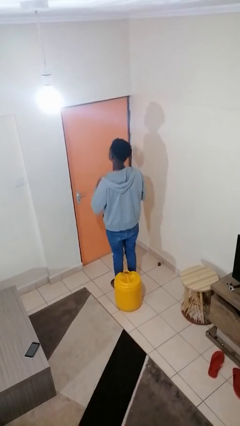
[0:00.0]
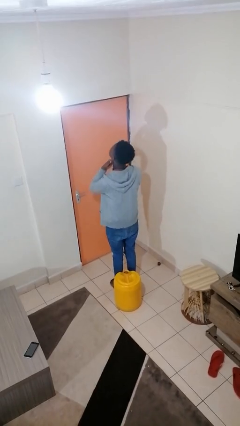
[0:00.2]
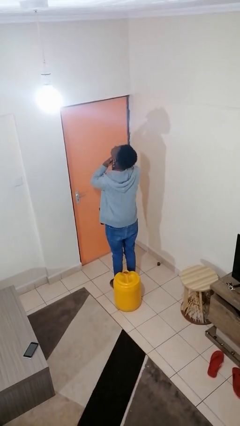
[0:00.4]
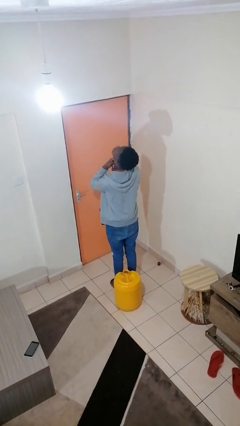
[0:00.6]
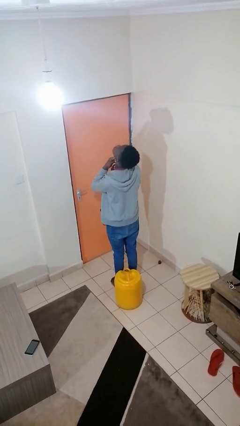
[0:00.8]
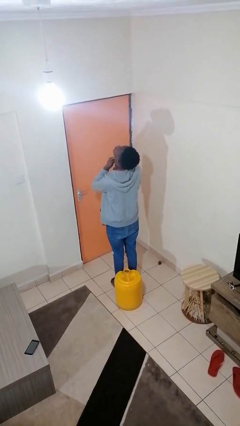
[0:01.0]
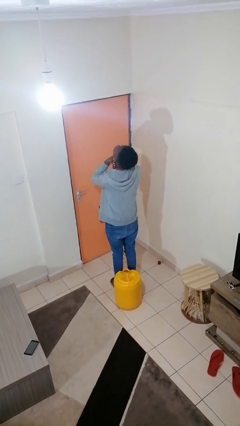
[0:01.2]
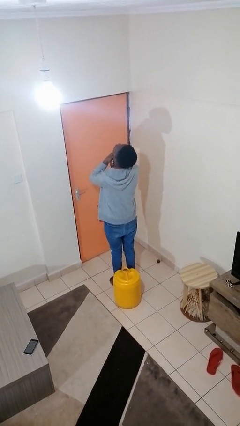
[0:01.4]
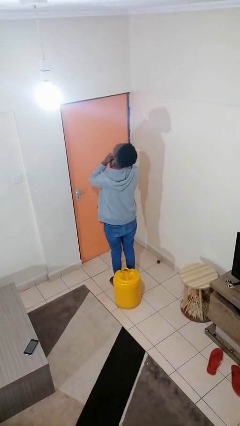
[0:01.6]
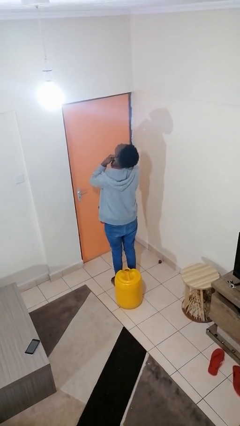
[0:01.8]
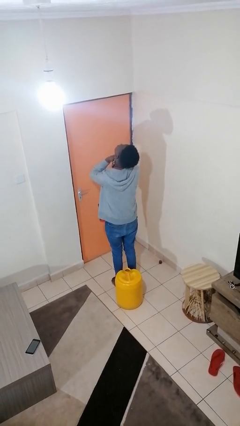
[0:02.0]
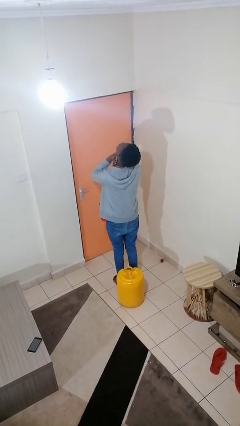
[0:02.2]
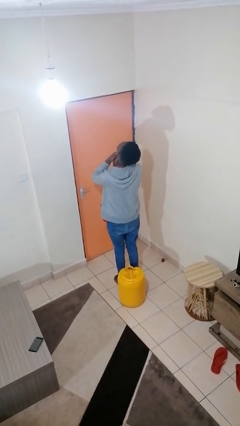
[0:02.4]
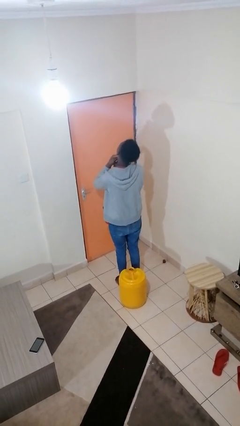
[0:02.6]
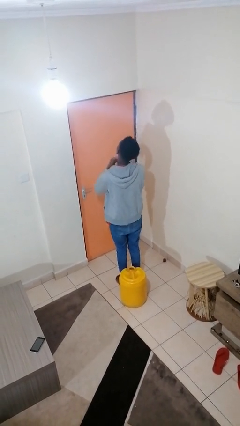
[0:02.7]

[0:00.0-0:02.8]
person rubs neck

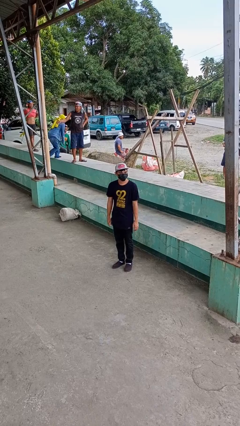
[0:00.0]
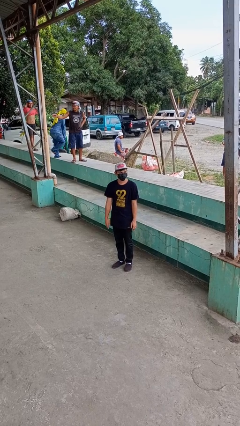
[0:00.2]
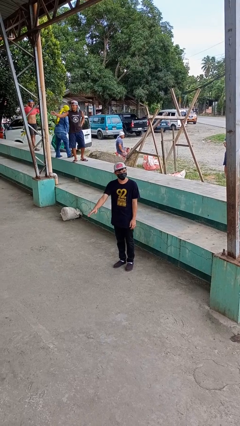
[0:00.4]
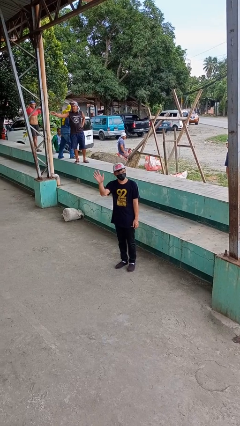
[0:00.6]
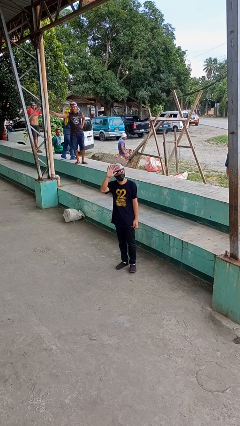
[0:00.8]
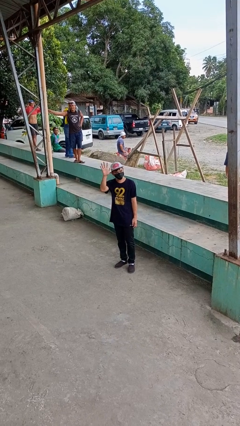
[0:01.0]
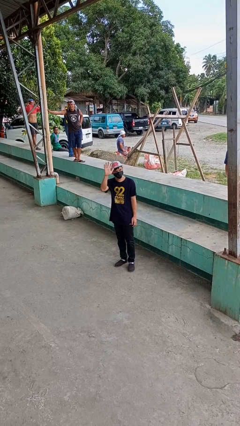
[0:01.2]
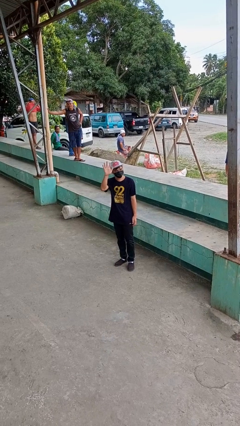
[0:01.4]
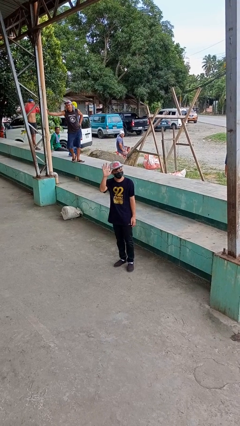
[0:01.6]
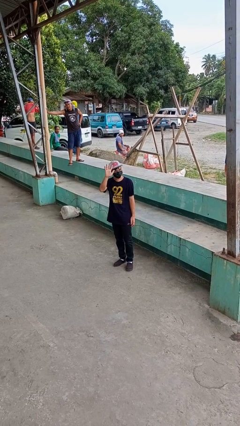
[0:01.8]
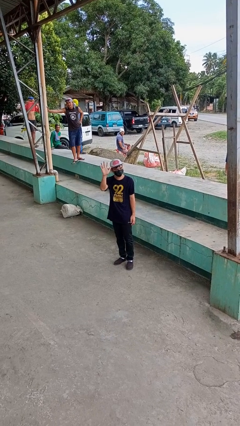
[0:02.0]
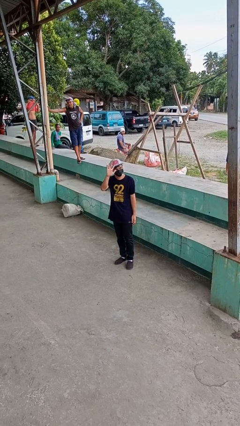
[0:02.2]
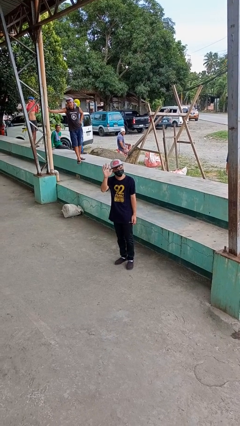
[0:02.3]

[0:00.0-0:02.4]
person waves at person

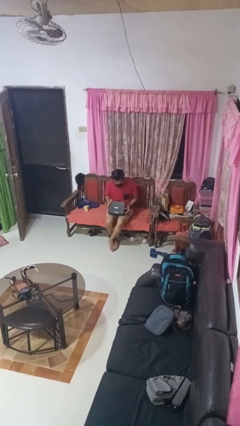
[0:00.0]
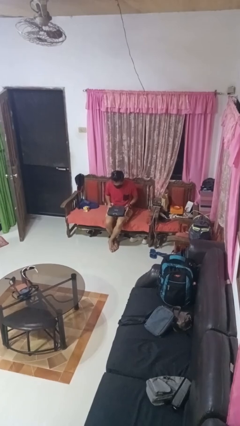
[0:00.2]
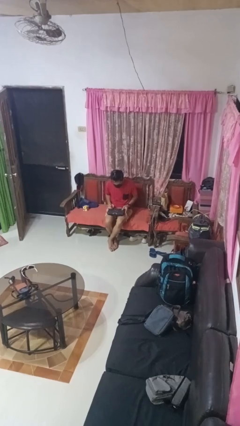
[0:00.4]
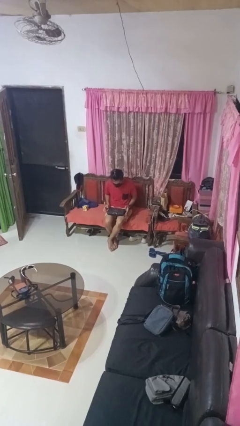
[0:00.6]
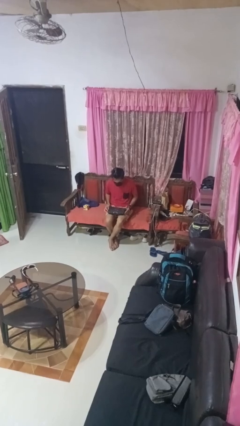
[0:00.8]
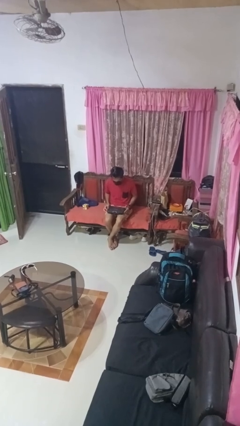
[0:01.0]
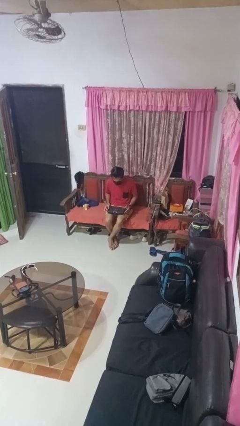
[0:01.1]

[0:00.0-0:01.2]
person closes laptop

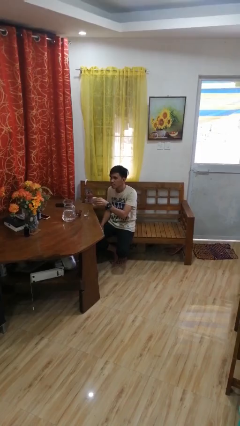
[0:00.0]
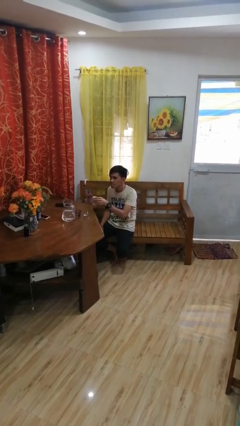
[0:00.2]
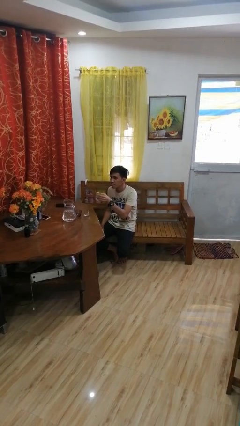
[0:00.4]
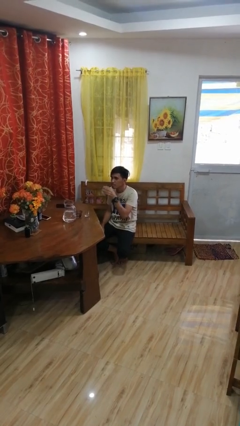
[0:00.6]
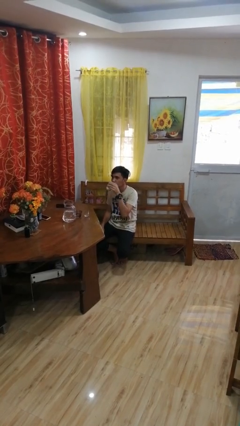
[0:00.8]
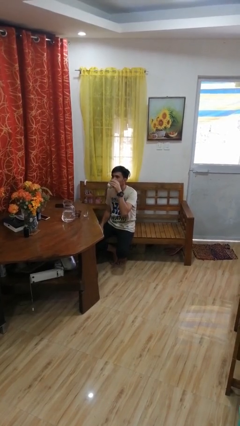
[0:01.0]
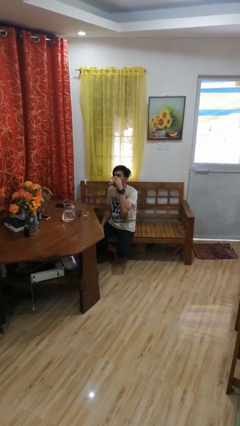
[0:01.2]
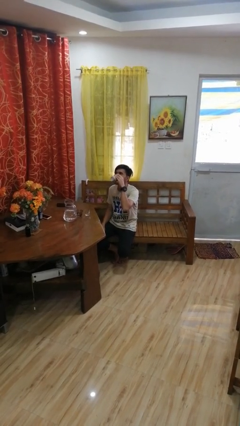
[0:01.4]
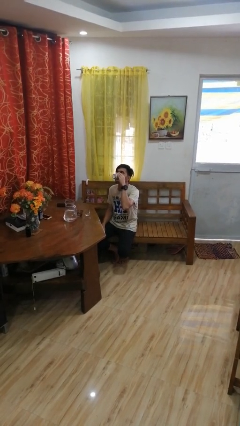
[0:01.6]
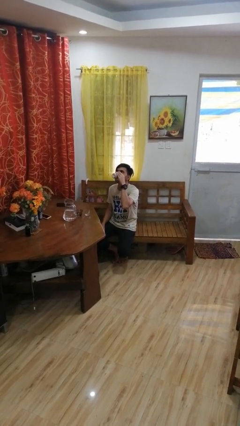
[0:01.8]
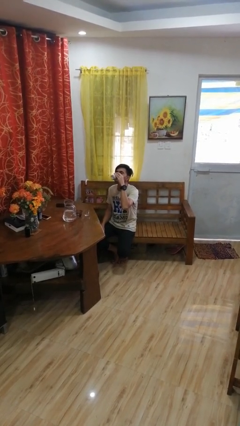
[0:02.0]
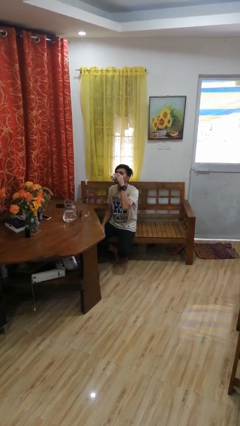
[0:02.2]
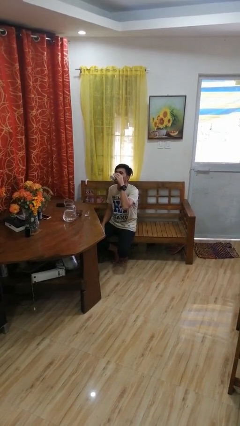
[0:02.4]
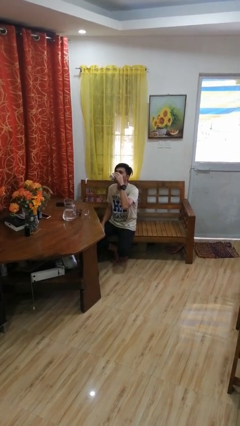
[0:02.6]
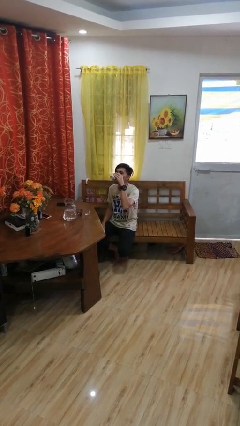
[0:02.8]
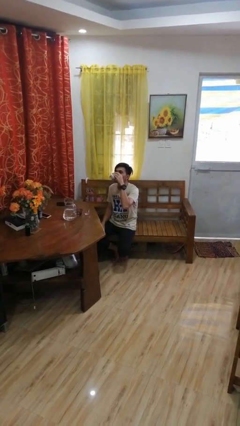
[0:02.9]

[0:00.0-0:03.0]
person drinks from shotglass

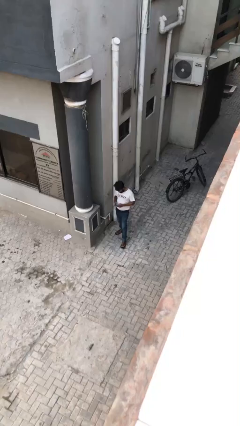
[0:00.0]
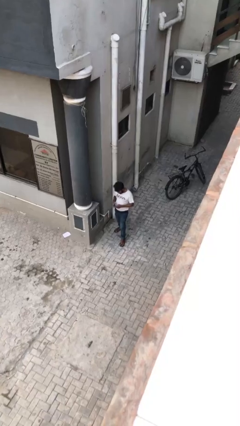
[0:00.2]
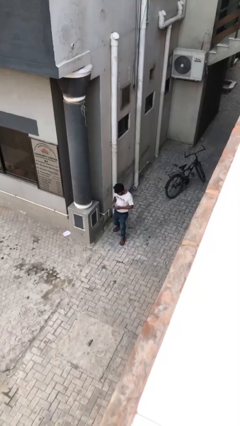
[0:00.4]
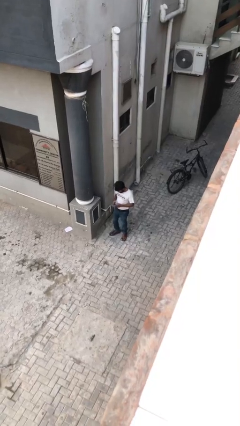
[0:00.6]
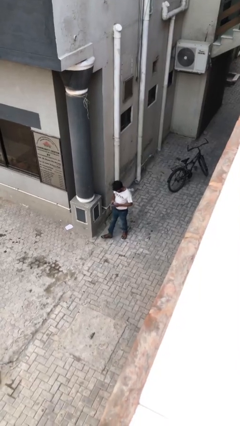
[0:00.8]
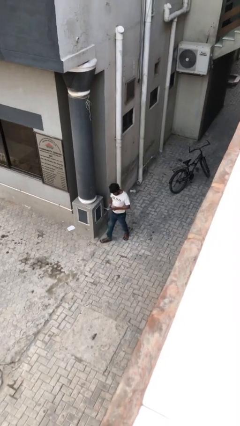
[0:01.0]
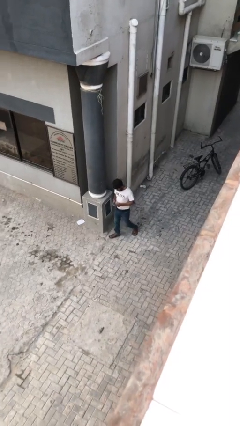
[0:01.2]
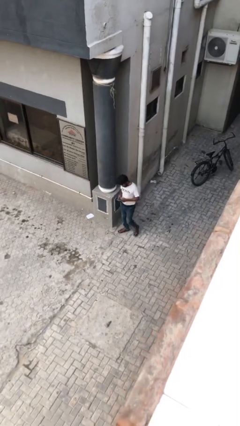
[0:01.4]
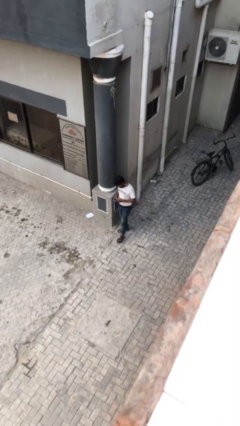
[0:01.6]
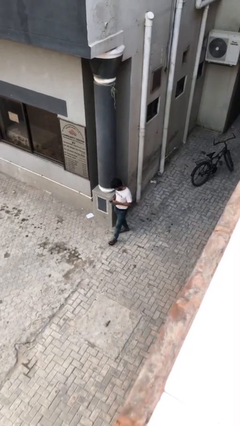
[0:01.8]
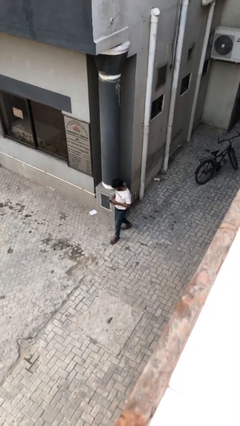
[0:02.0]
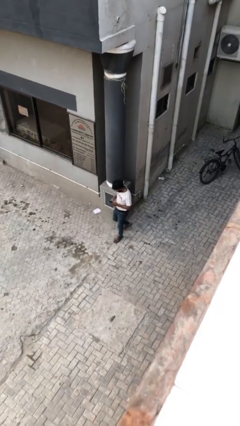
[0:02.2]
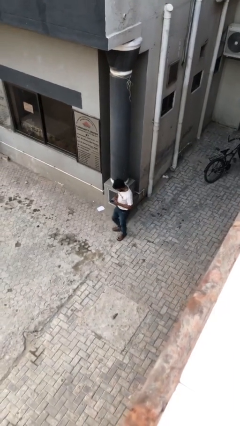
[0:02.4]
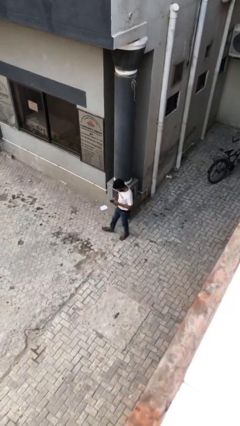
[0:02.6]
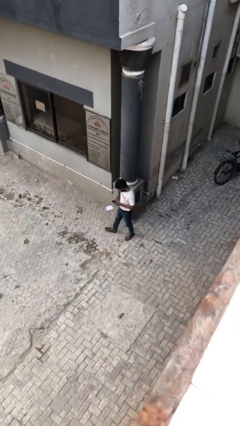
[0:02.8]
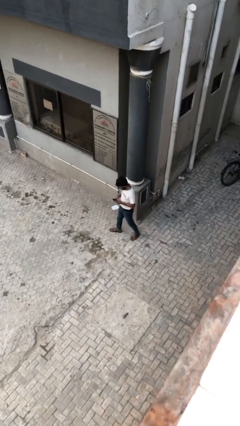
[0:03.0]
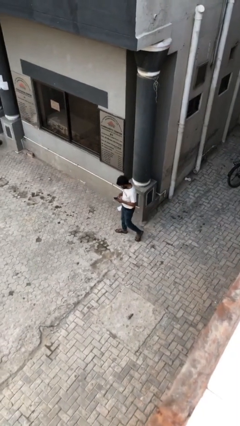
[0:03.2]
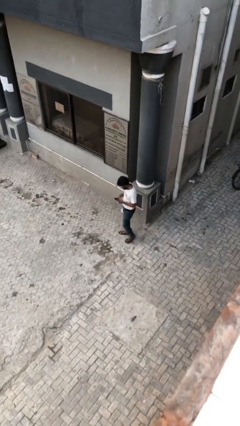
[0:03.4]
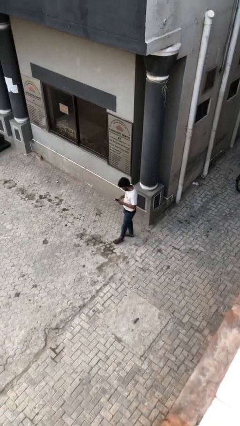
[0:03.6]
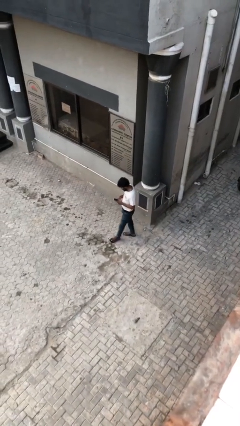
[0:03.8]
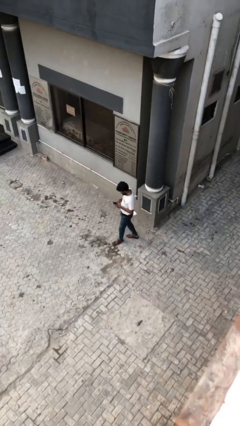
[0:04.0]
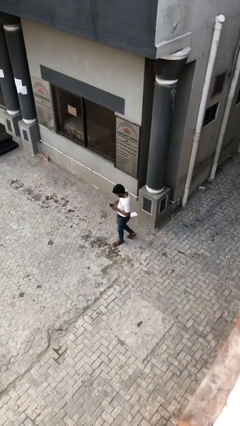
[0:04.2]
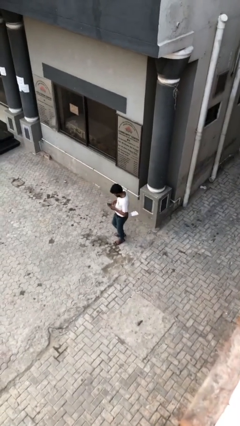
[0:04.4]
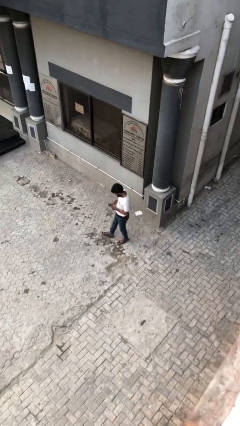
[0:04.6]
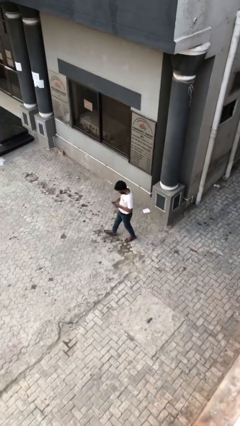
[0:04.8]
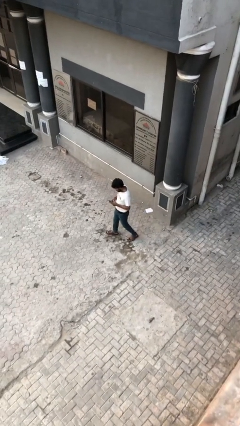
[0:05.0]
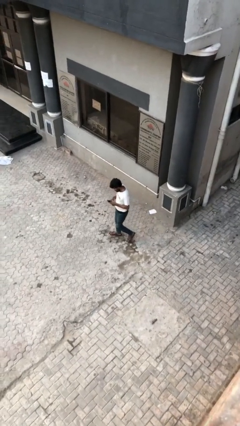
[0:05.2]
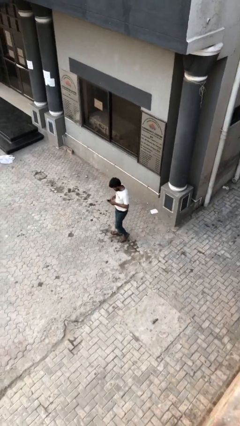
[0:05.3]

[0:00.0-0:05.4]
person texts on phone

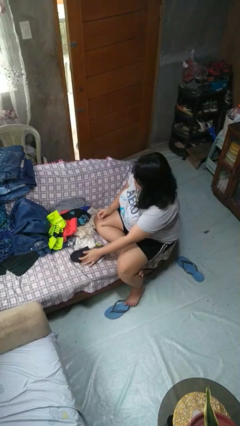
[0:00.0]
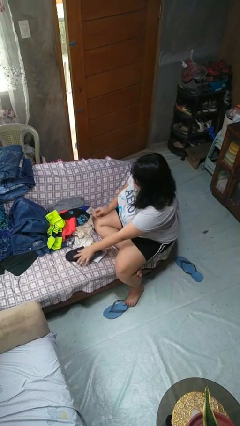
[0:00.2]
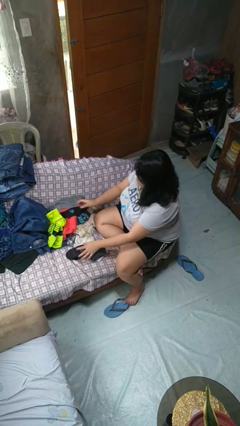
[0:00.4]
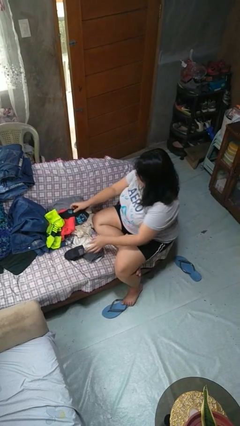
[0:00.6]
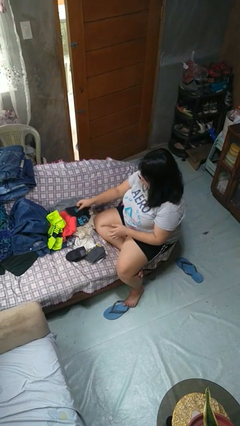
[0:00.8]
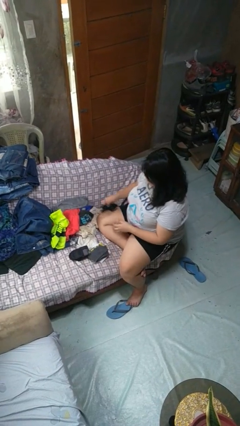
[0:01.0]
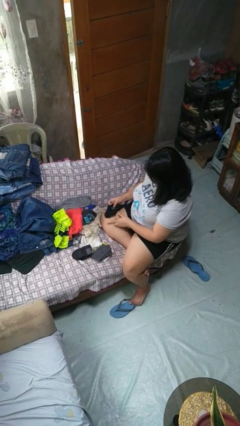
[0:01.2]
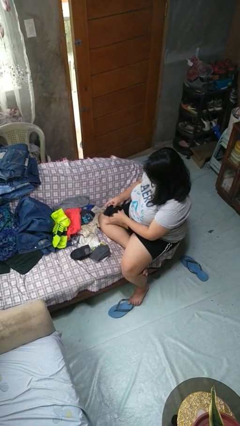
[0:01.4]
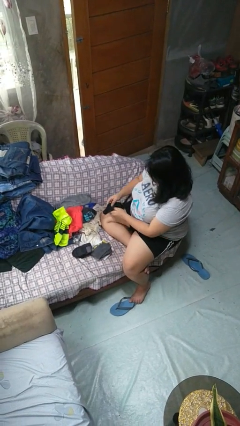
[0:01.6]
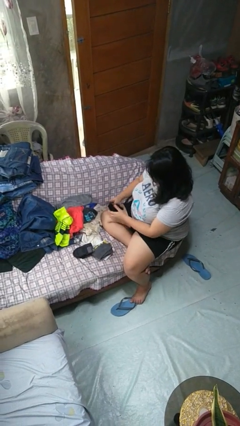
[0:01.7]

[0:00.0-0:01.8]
person folds socks

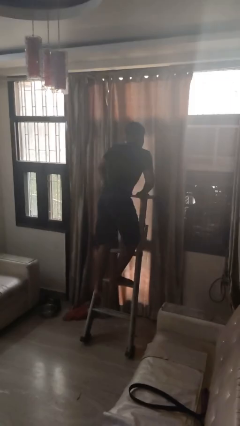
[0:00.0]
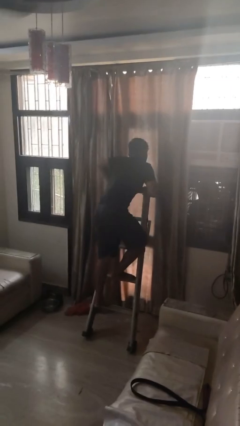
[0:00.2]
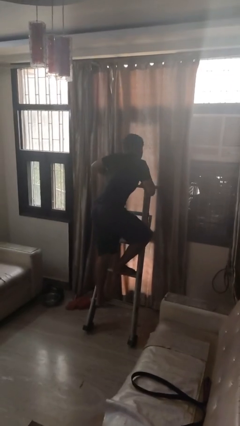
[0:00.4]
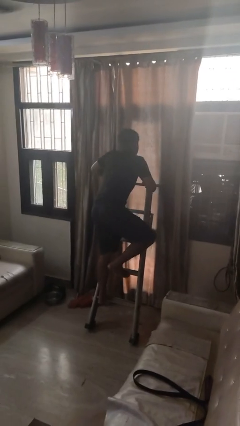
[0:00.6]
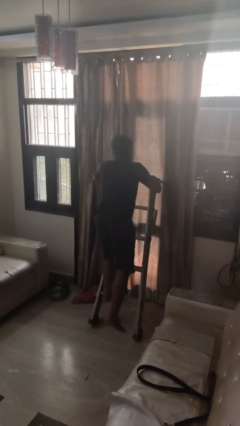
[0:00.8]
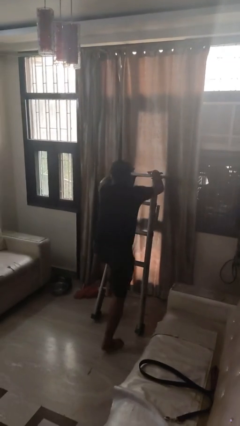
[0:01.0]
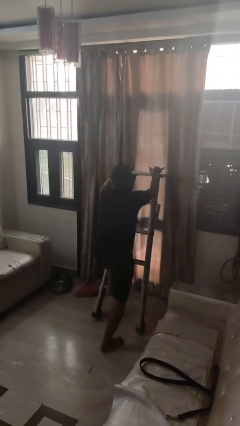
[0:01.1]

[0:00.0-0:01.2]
person climbs down ladder
